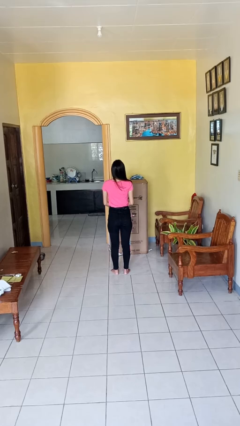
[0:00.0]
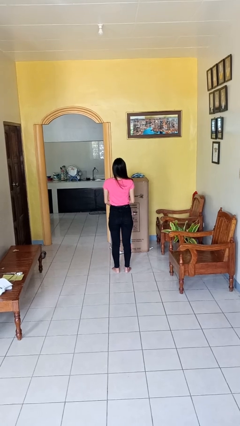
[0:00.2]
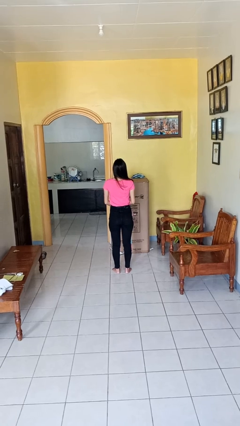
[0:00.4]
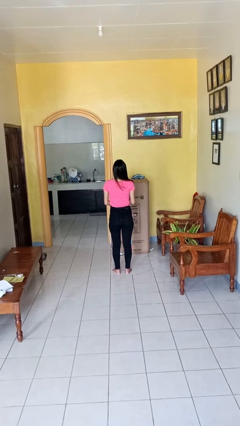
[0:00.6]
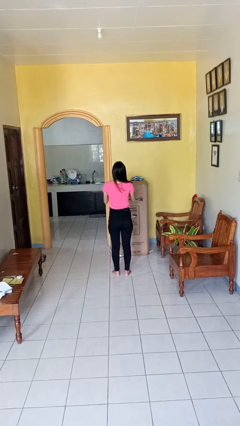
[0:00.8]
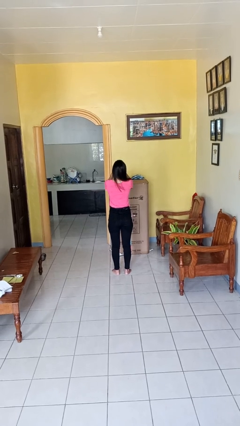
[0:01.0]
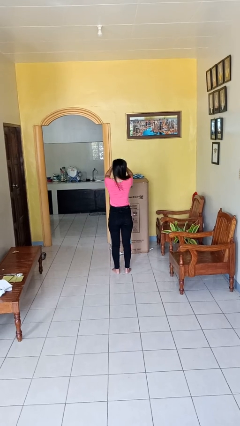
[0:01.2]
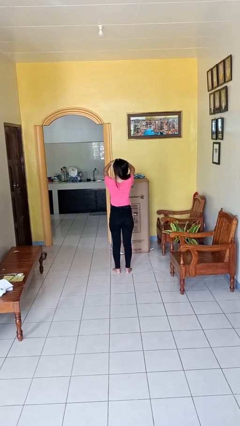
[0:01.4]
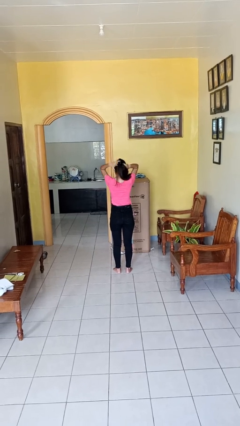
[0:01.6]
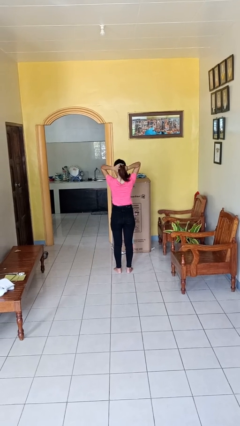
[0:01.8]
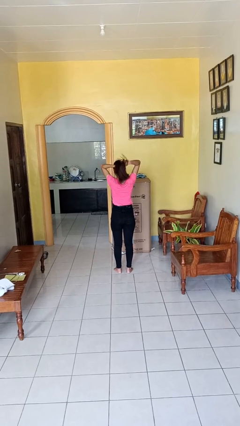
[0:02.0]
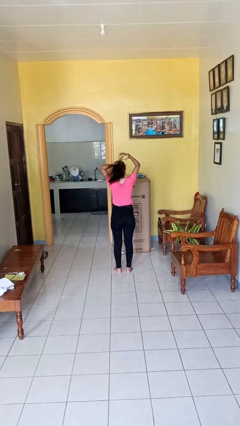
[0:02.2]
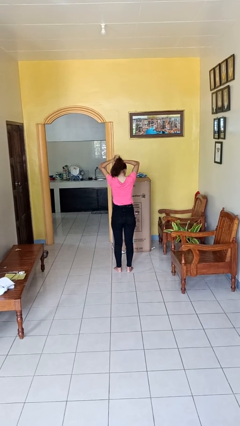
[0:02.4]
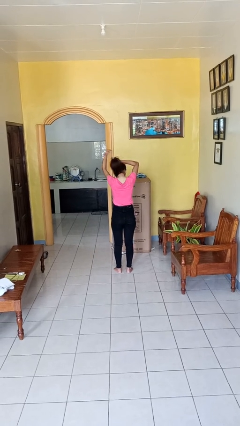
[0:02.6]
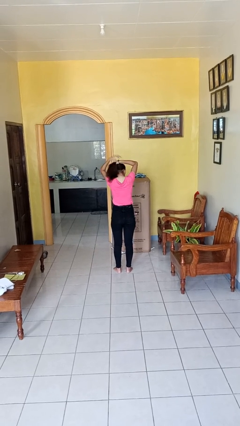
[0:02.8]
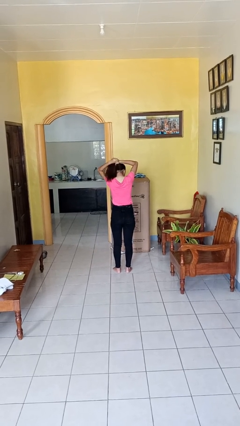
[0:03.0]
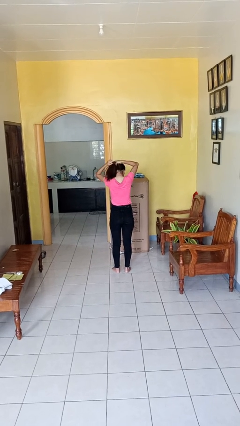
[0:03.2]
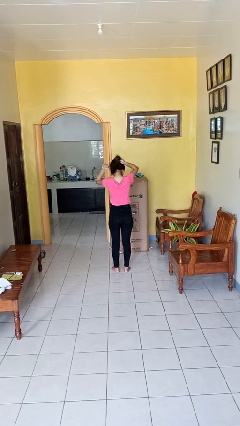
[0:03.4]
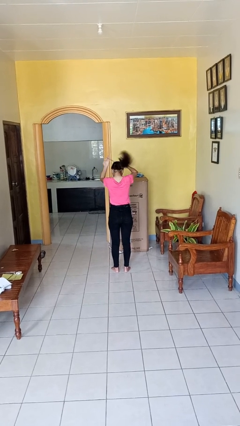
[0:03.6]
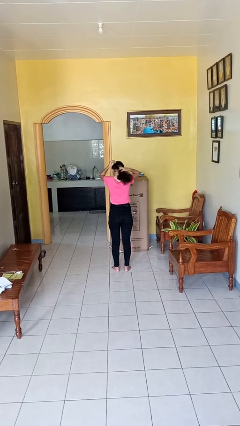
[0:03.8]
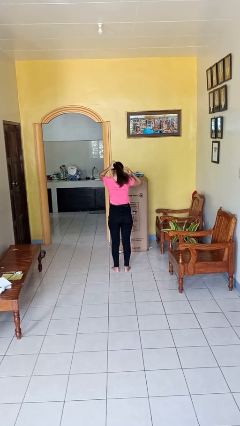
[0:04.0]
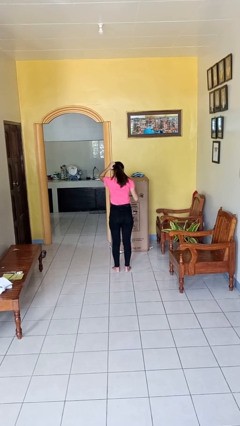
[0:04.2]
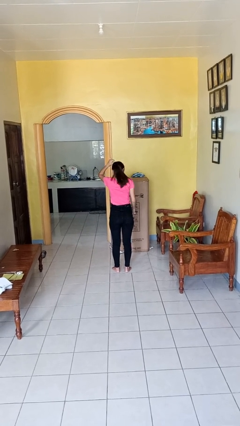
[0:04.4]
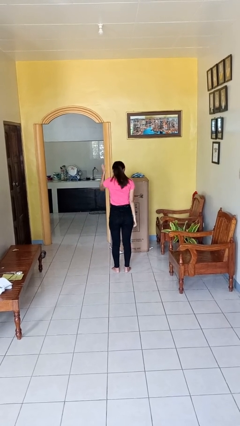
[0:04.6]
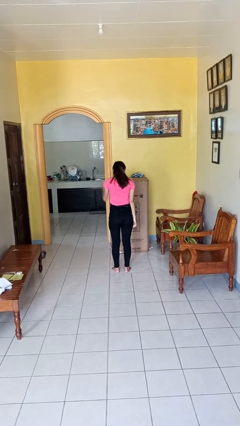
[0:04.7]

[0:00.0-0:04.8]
person puts hair in ponytail

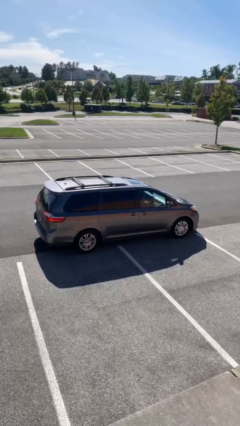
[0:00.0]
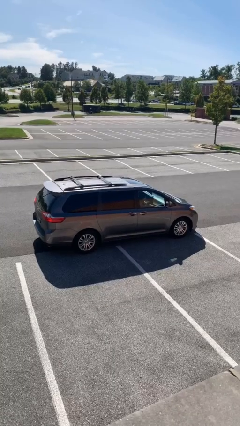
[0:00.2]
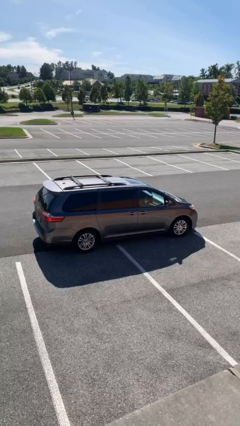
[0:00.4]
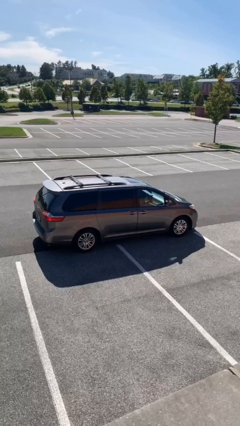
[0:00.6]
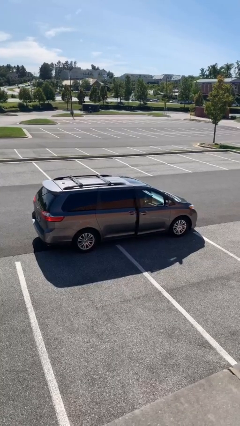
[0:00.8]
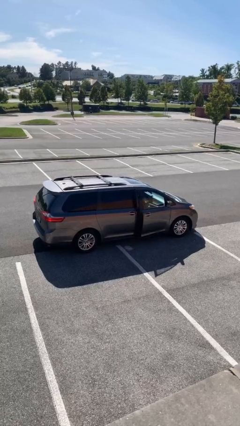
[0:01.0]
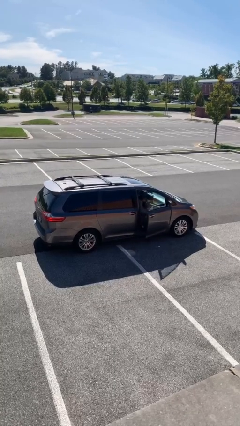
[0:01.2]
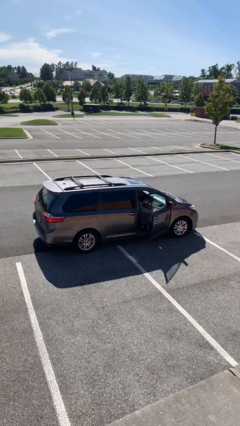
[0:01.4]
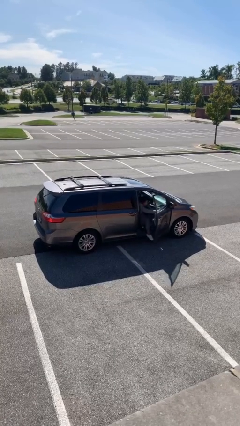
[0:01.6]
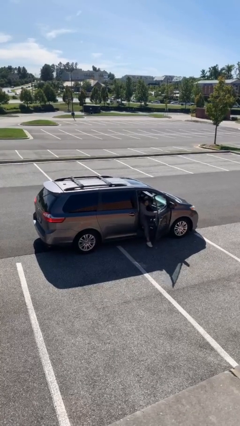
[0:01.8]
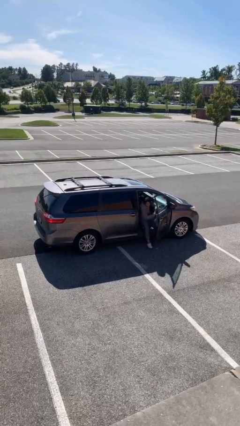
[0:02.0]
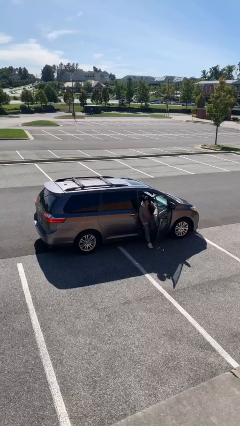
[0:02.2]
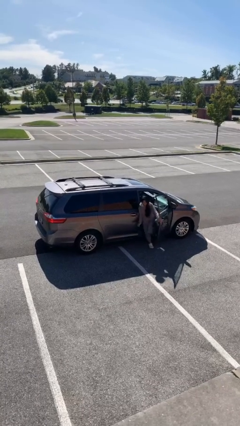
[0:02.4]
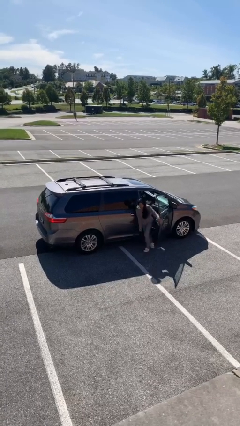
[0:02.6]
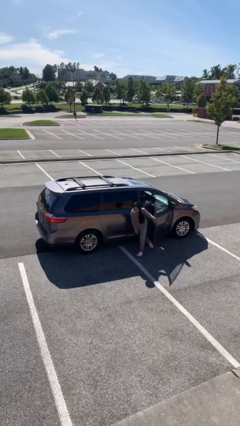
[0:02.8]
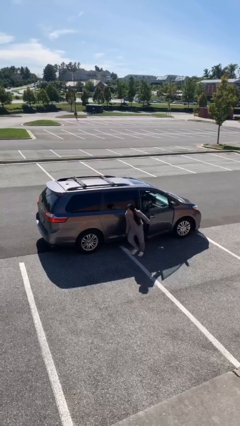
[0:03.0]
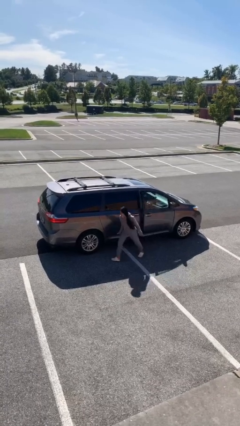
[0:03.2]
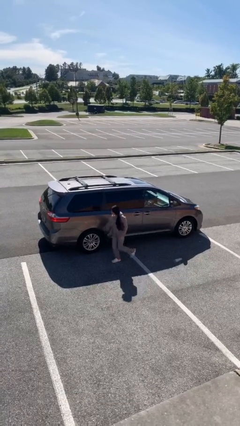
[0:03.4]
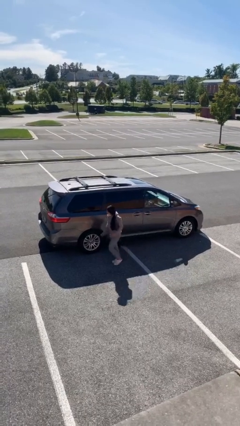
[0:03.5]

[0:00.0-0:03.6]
car drops off person

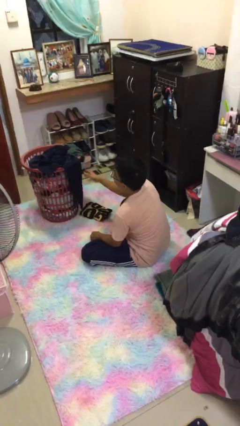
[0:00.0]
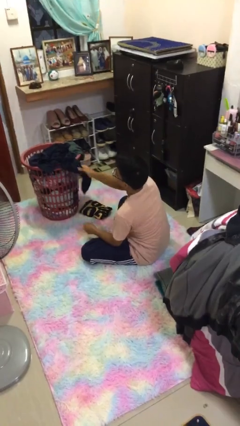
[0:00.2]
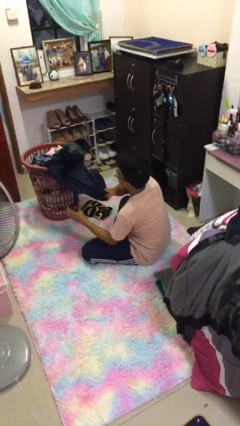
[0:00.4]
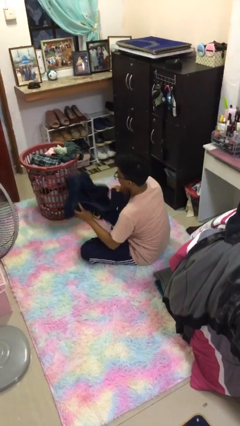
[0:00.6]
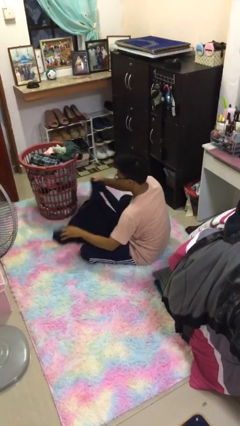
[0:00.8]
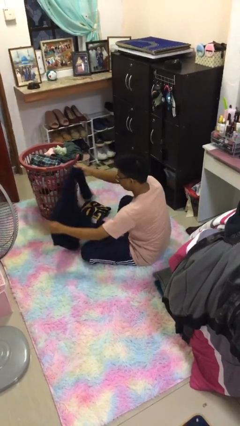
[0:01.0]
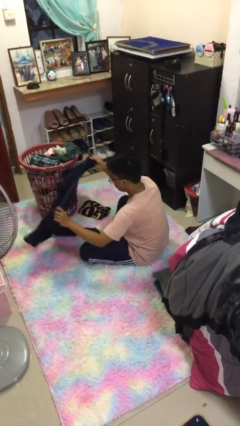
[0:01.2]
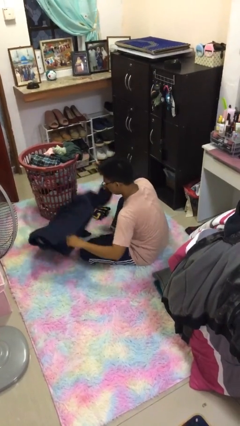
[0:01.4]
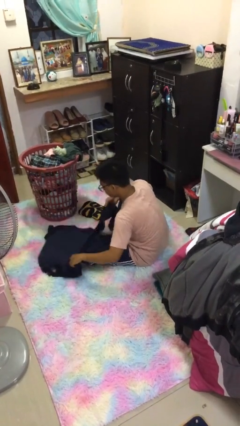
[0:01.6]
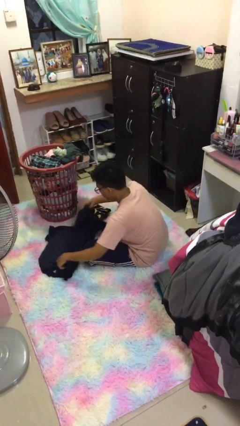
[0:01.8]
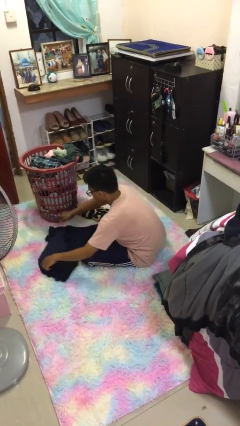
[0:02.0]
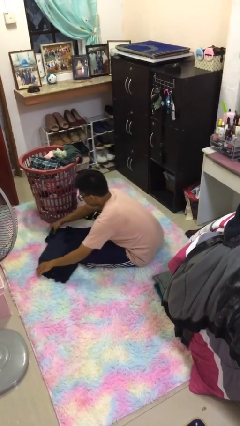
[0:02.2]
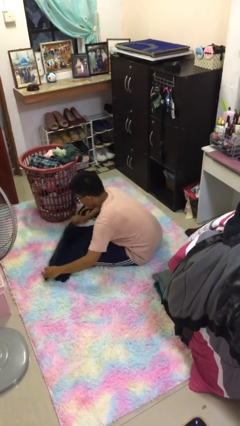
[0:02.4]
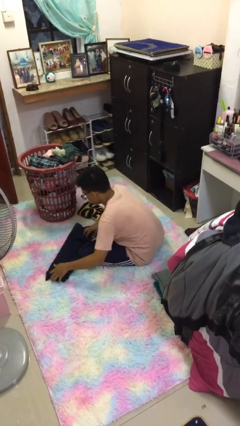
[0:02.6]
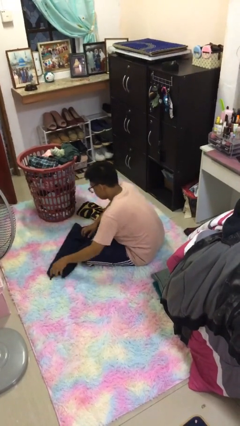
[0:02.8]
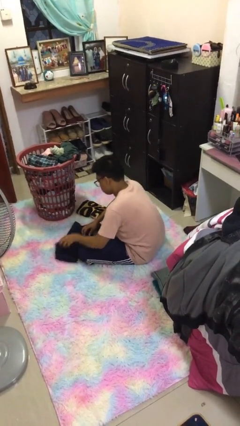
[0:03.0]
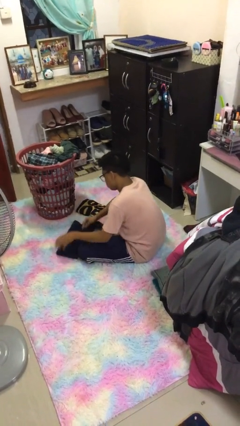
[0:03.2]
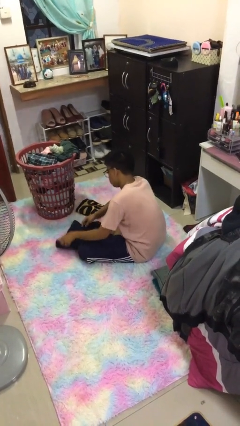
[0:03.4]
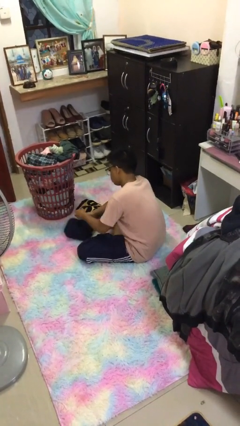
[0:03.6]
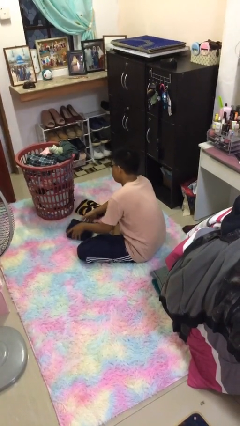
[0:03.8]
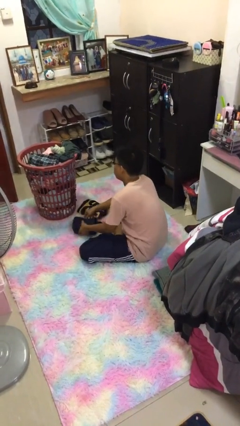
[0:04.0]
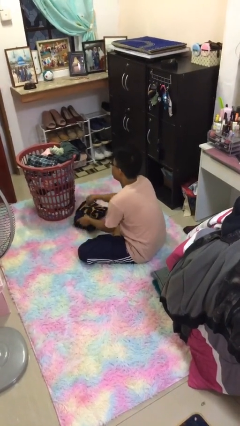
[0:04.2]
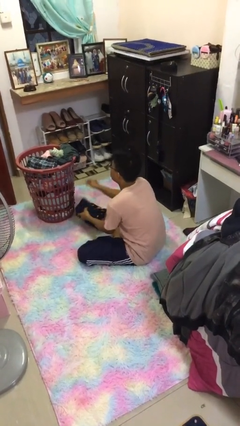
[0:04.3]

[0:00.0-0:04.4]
person folds shirt

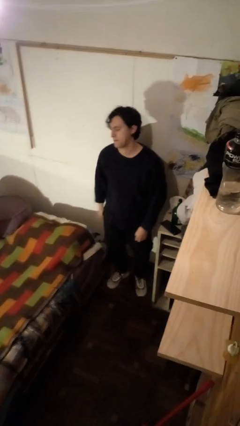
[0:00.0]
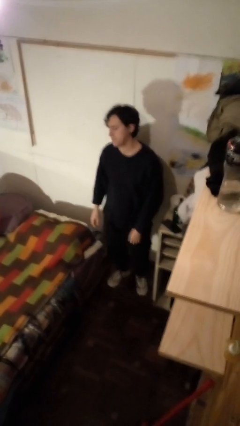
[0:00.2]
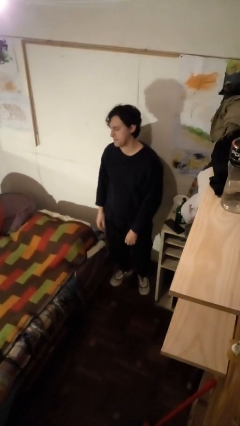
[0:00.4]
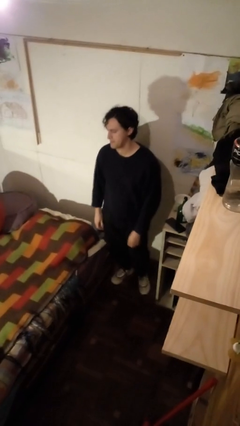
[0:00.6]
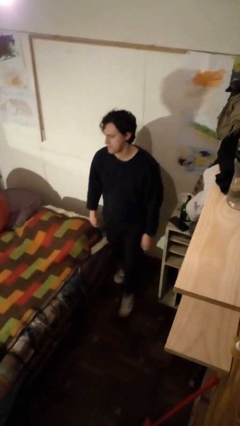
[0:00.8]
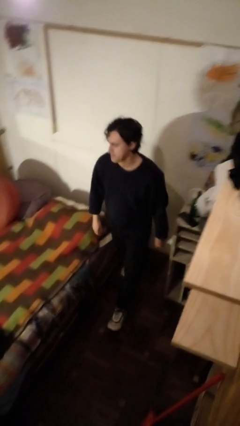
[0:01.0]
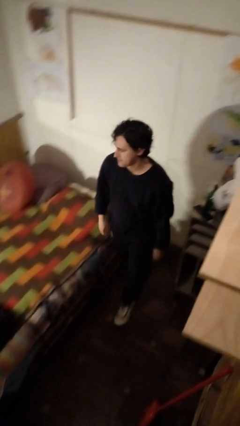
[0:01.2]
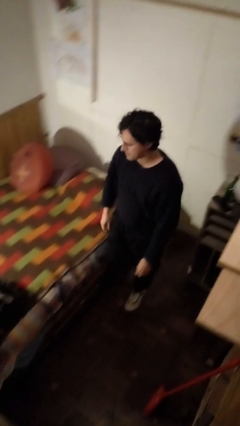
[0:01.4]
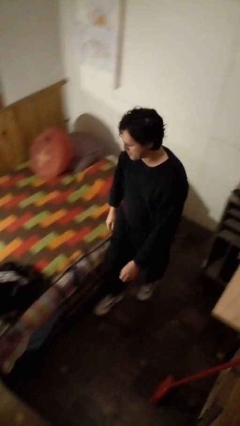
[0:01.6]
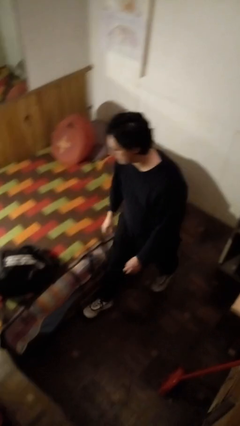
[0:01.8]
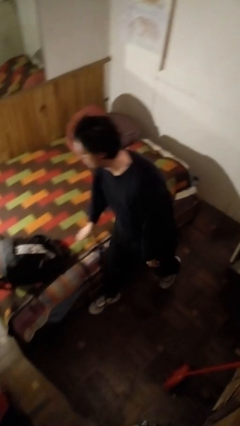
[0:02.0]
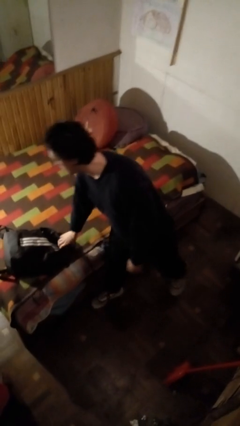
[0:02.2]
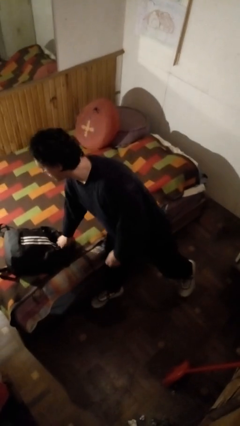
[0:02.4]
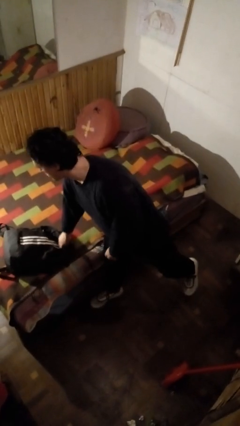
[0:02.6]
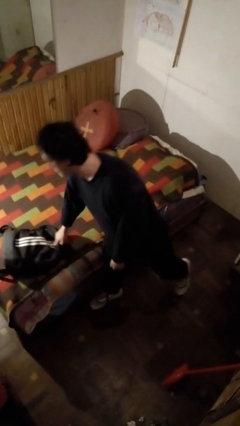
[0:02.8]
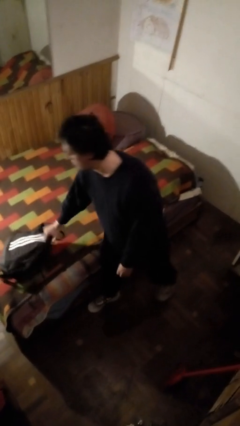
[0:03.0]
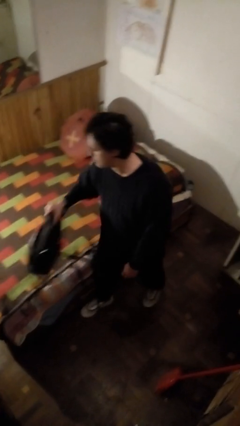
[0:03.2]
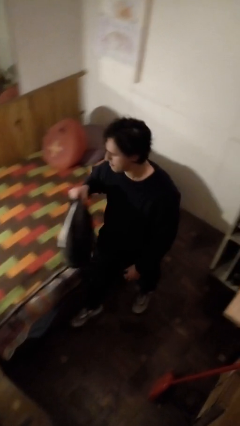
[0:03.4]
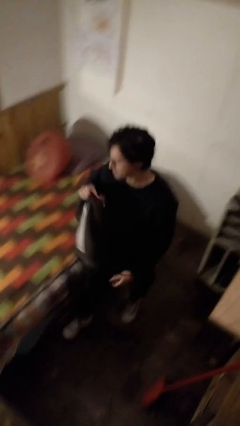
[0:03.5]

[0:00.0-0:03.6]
person picks up object from bed

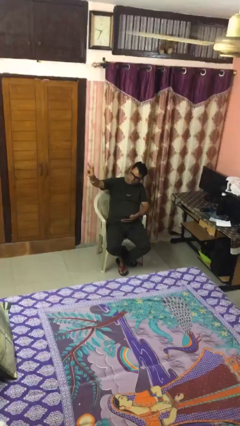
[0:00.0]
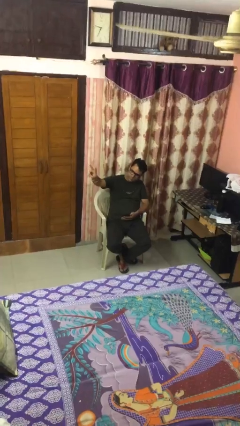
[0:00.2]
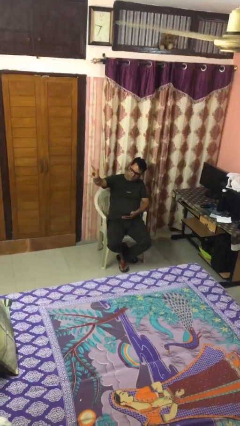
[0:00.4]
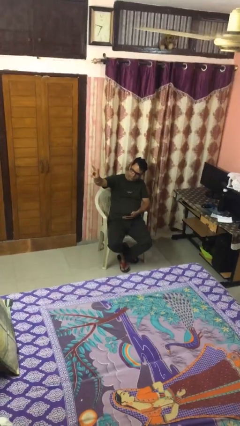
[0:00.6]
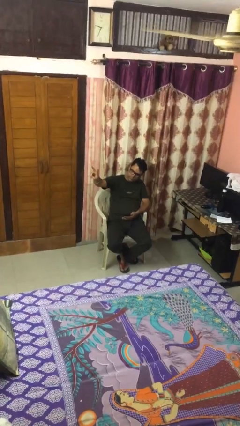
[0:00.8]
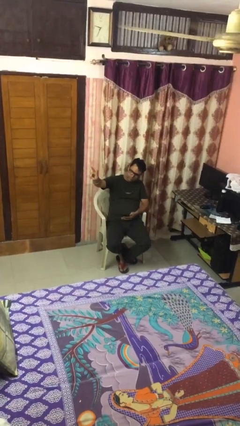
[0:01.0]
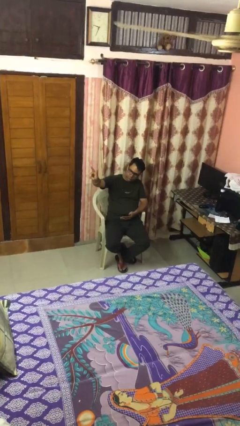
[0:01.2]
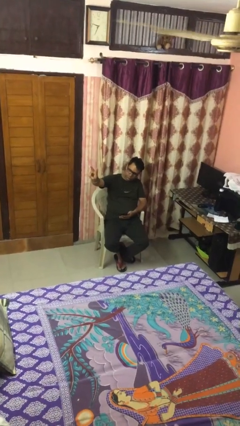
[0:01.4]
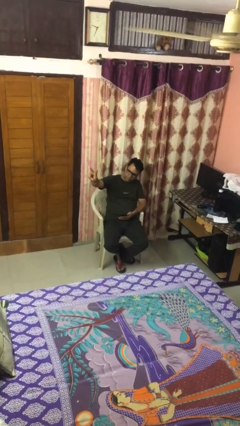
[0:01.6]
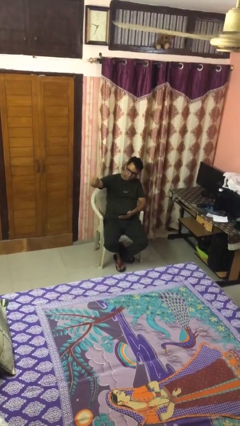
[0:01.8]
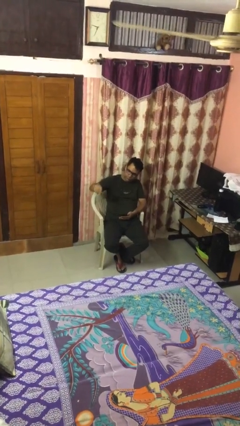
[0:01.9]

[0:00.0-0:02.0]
person gestures peace
